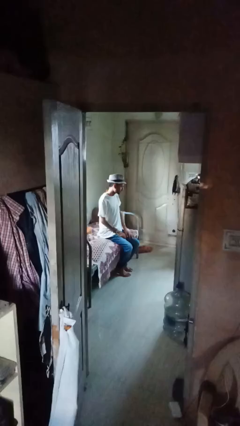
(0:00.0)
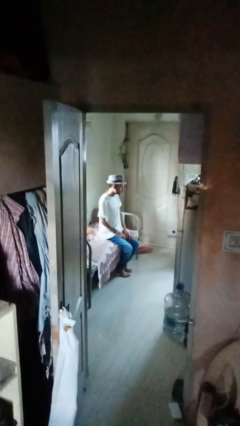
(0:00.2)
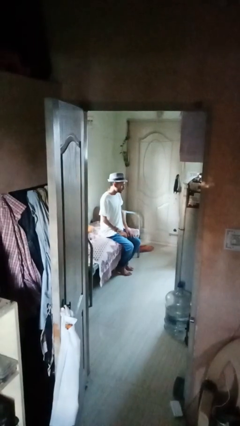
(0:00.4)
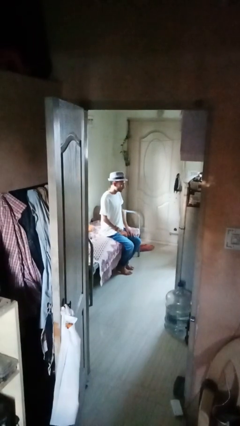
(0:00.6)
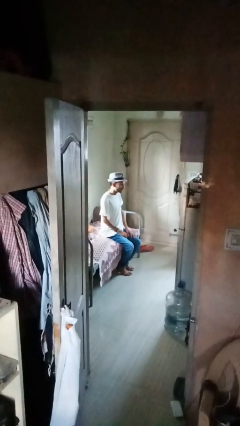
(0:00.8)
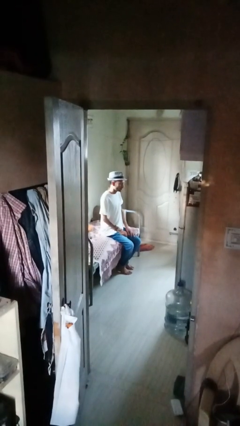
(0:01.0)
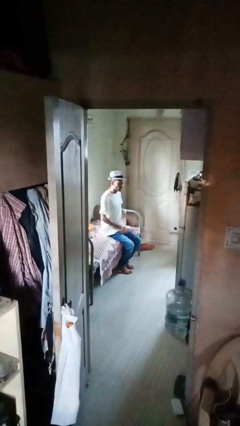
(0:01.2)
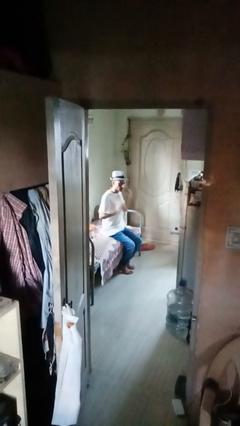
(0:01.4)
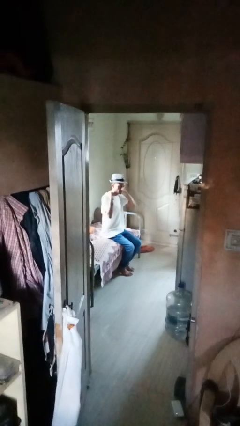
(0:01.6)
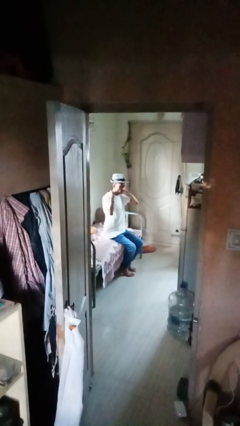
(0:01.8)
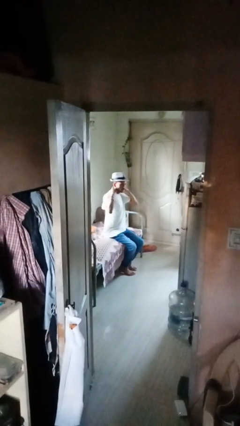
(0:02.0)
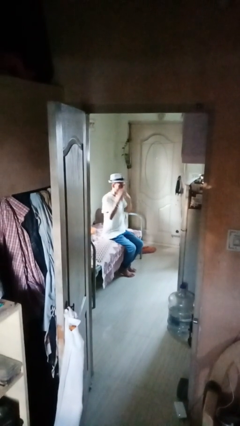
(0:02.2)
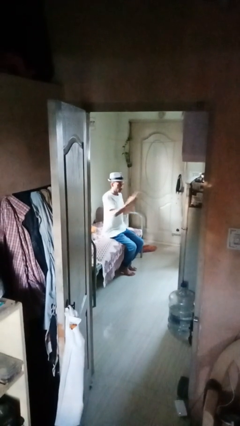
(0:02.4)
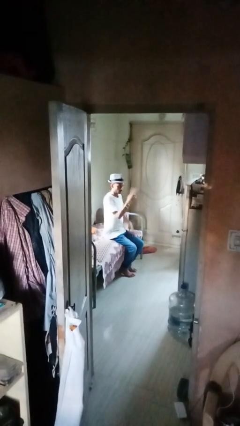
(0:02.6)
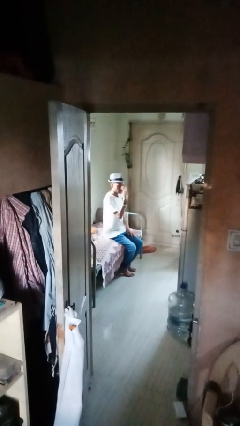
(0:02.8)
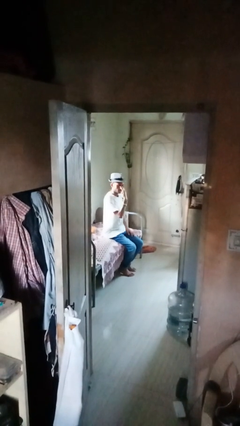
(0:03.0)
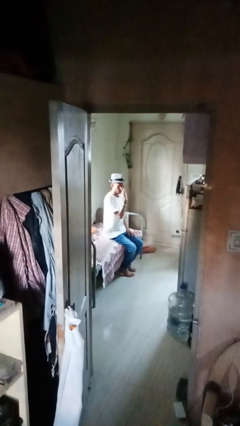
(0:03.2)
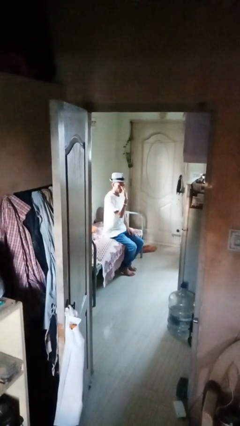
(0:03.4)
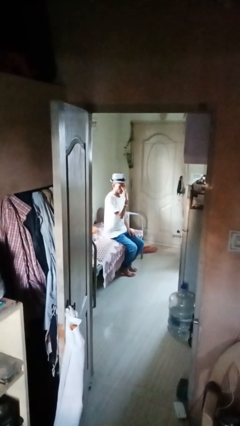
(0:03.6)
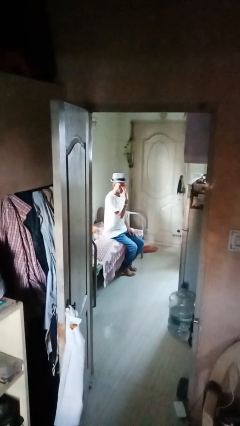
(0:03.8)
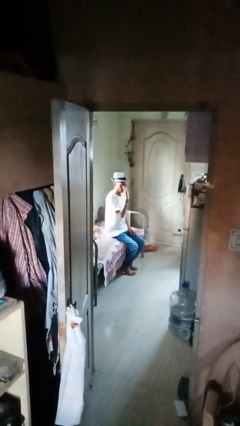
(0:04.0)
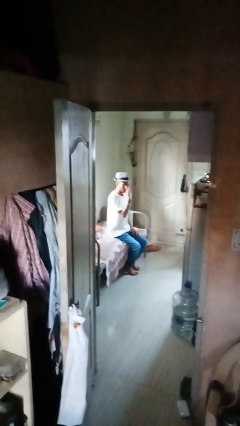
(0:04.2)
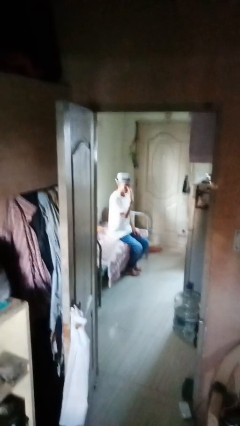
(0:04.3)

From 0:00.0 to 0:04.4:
person gestures watch closely

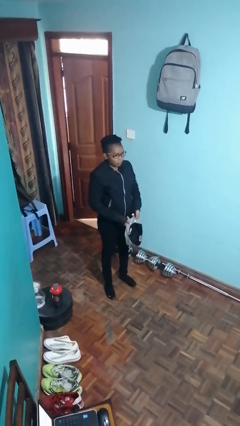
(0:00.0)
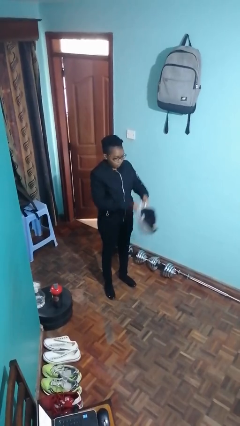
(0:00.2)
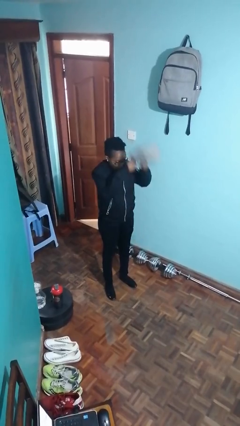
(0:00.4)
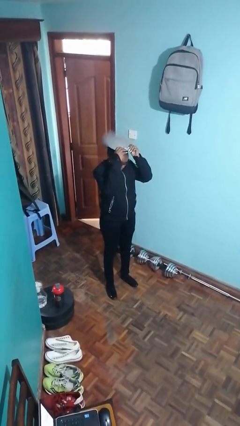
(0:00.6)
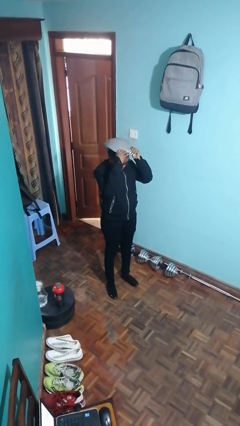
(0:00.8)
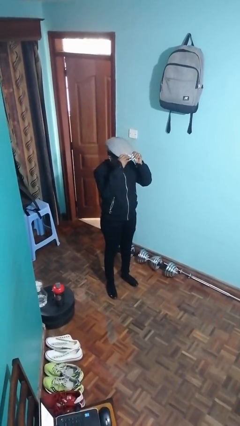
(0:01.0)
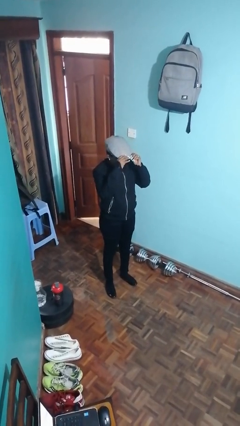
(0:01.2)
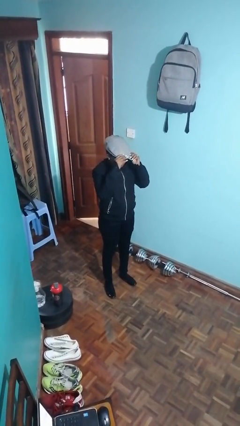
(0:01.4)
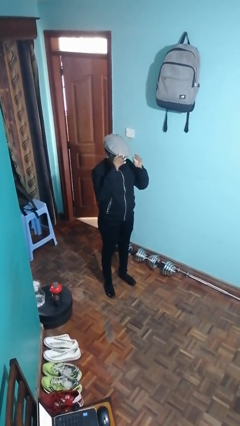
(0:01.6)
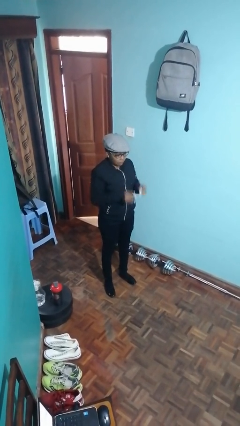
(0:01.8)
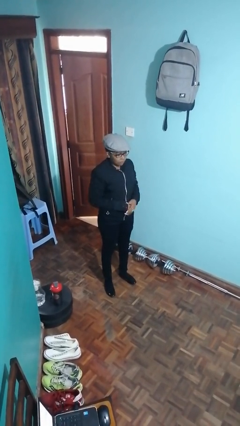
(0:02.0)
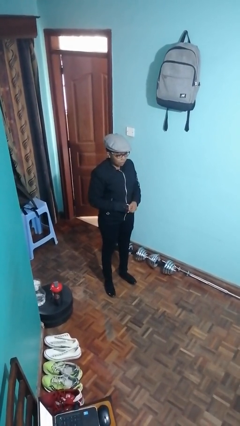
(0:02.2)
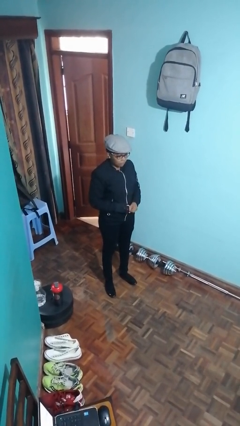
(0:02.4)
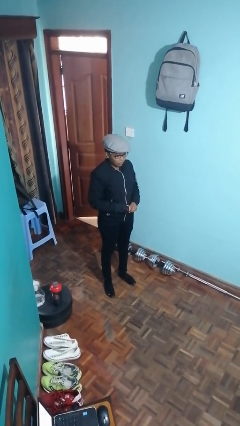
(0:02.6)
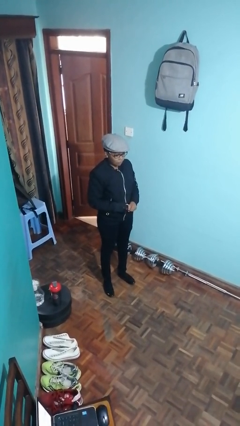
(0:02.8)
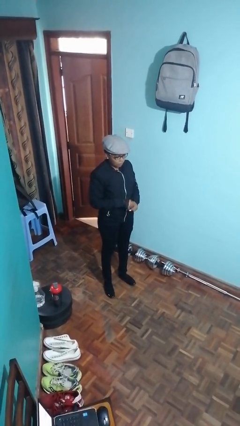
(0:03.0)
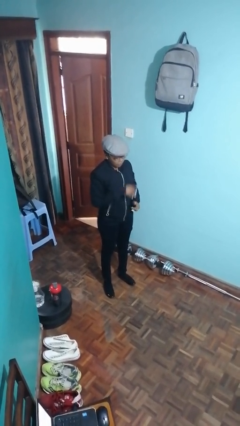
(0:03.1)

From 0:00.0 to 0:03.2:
person puts on hat

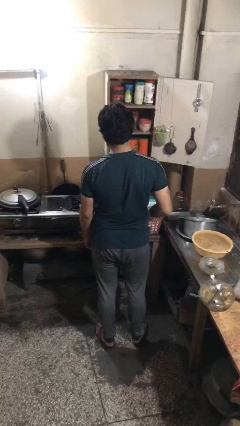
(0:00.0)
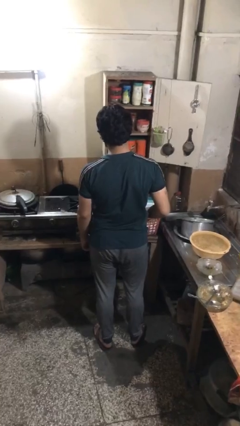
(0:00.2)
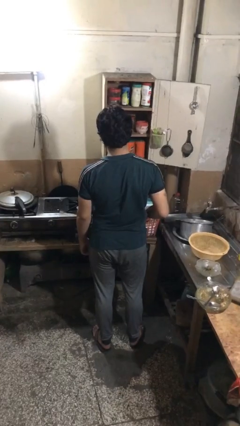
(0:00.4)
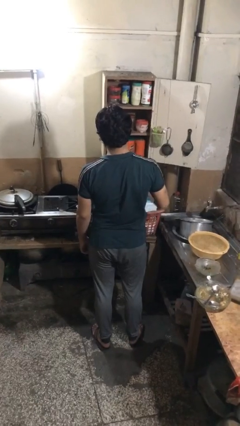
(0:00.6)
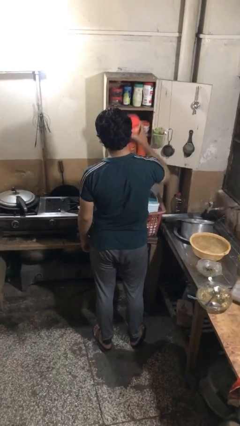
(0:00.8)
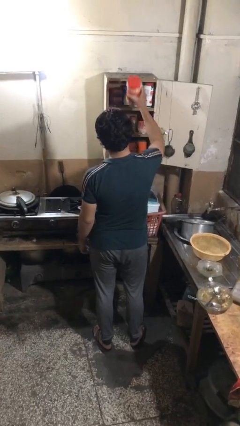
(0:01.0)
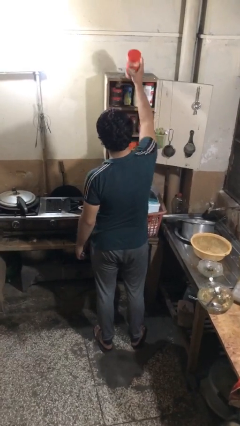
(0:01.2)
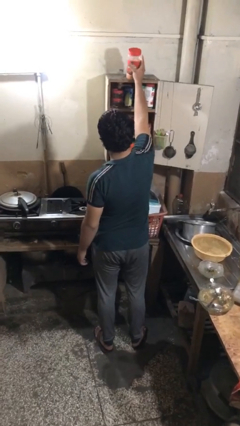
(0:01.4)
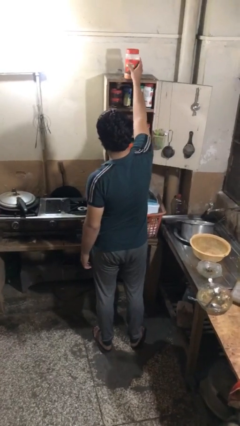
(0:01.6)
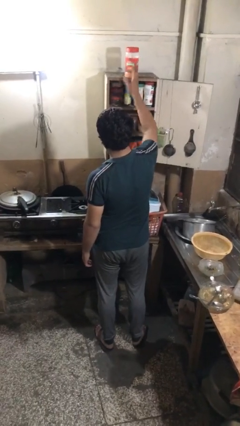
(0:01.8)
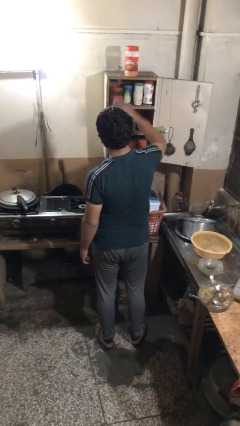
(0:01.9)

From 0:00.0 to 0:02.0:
person takes object from cabinet

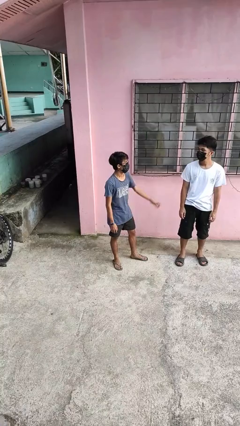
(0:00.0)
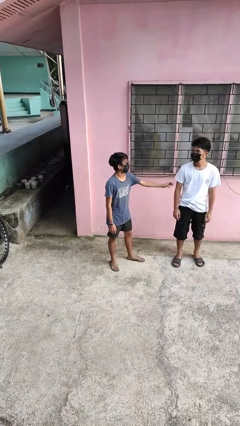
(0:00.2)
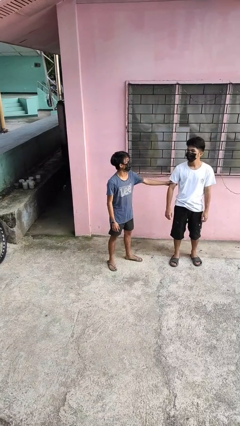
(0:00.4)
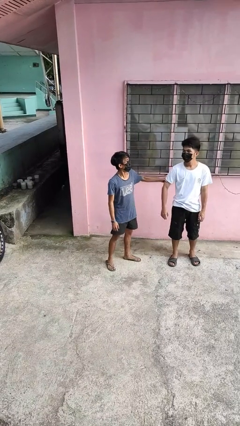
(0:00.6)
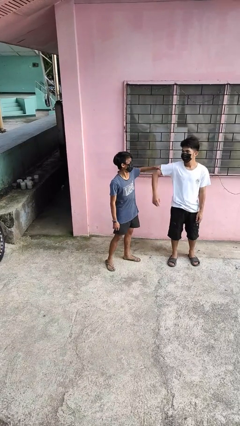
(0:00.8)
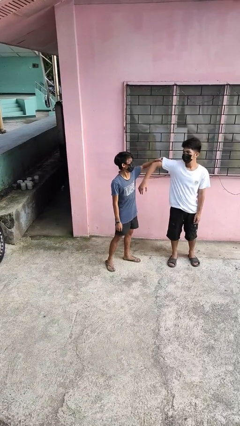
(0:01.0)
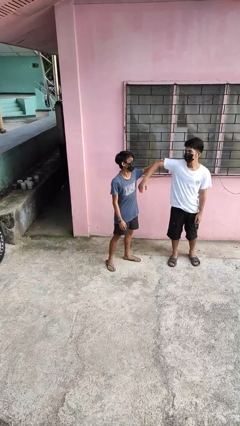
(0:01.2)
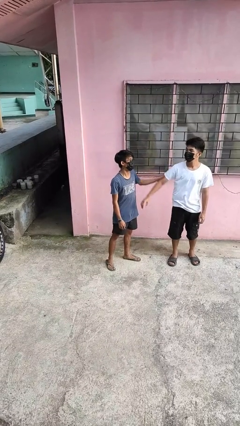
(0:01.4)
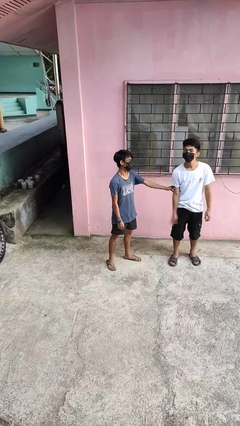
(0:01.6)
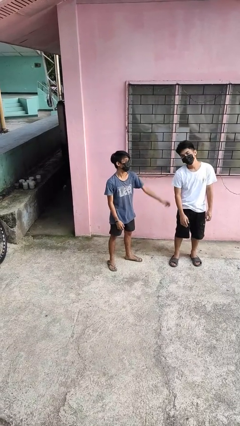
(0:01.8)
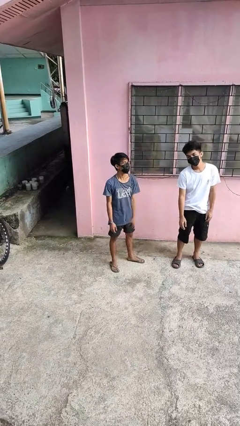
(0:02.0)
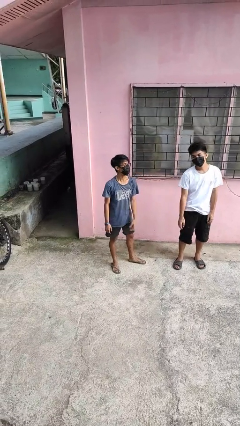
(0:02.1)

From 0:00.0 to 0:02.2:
person grabs person by bicep

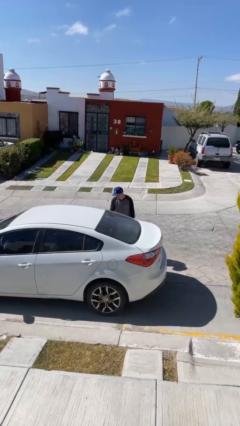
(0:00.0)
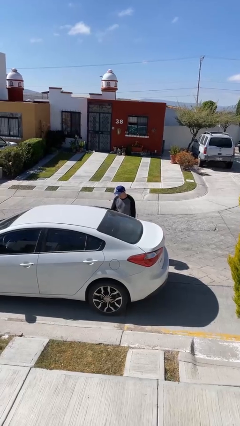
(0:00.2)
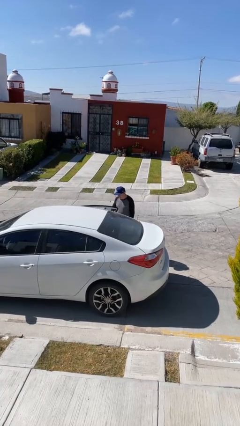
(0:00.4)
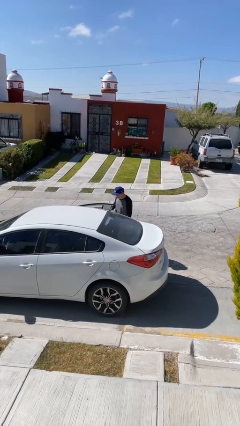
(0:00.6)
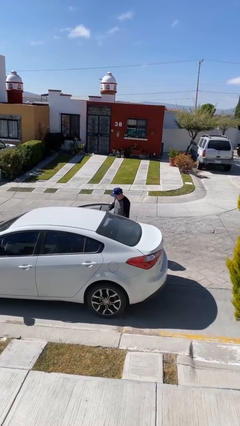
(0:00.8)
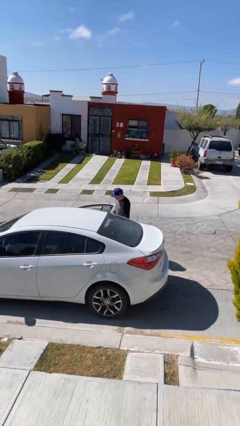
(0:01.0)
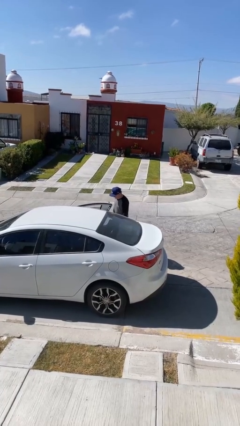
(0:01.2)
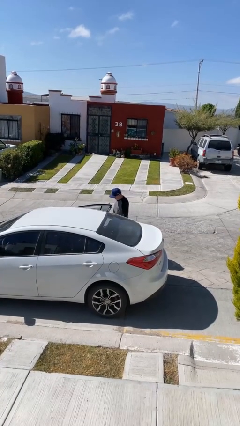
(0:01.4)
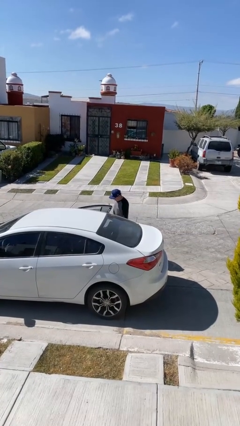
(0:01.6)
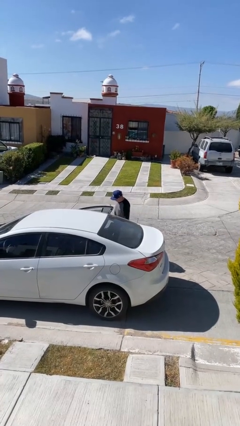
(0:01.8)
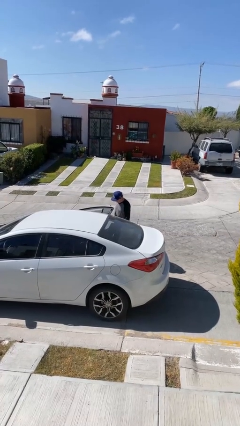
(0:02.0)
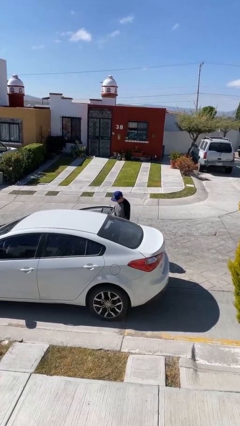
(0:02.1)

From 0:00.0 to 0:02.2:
person opens car door

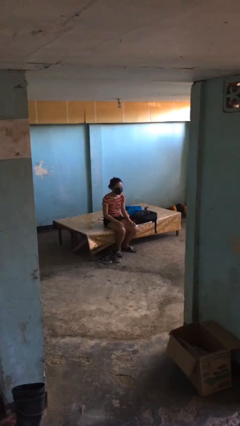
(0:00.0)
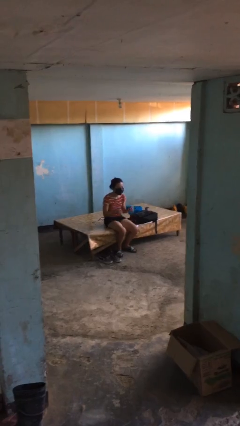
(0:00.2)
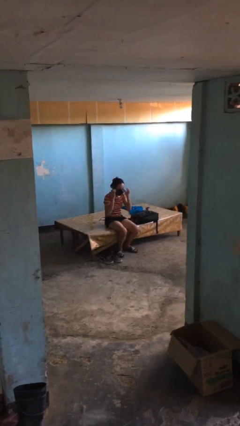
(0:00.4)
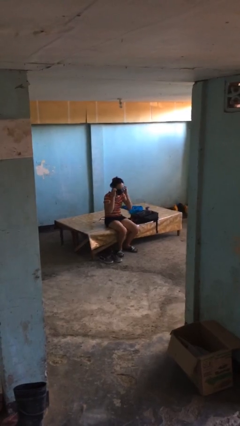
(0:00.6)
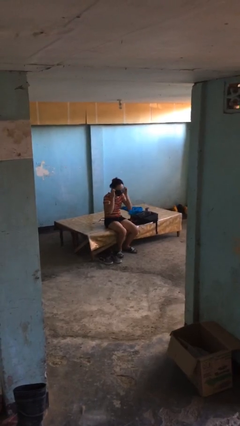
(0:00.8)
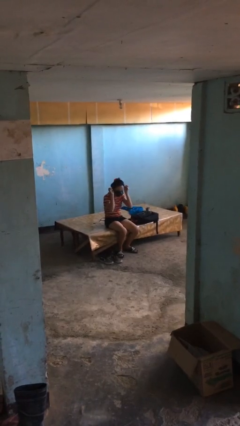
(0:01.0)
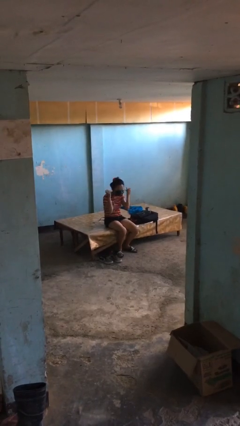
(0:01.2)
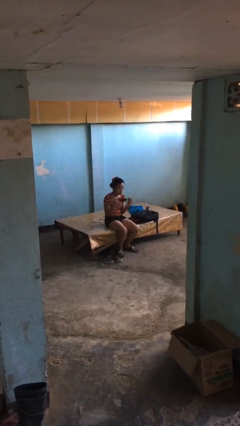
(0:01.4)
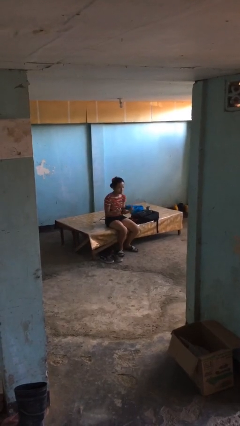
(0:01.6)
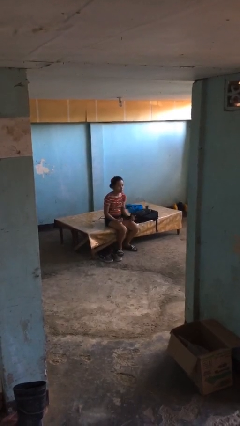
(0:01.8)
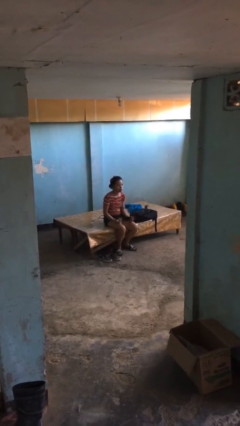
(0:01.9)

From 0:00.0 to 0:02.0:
person takes off facemask

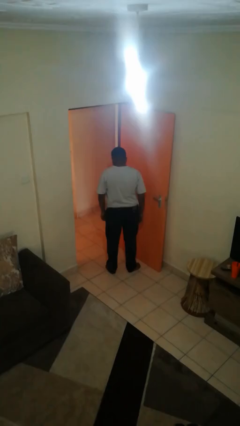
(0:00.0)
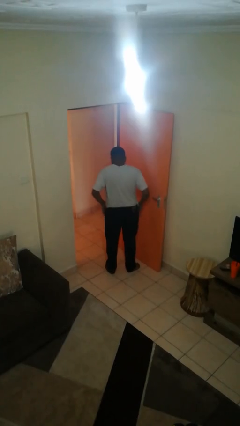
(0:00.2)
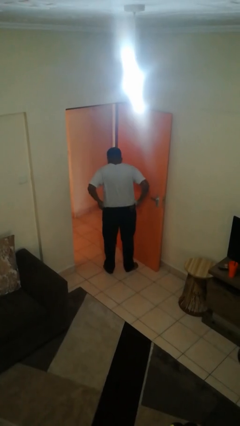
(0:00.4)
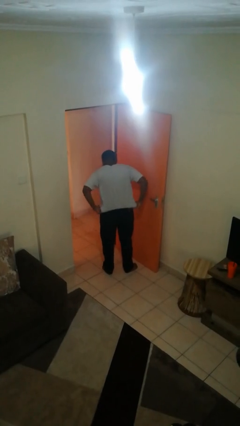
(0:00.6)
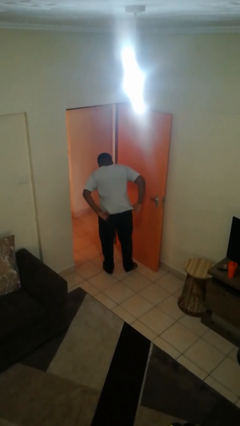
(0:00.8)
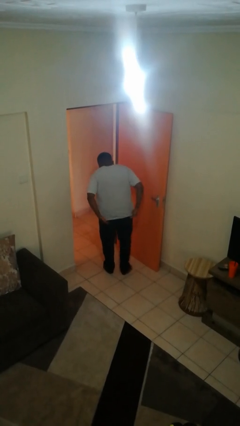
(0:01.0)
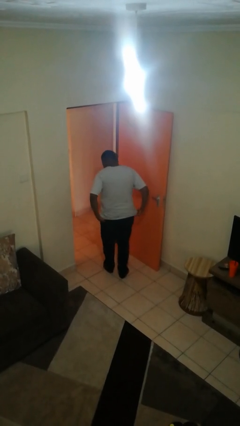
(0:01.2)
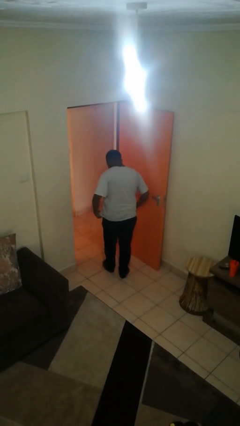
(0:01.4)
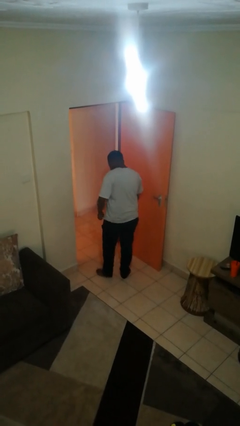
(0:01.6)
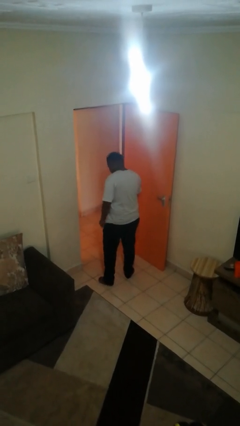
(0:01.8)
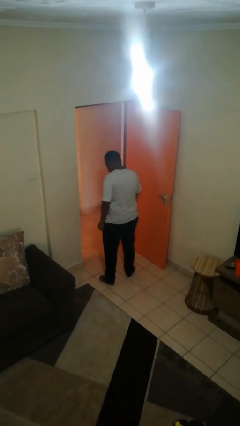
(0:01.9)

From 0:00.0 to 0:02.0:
person untucks shirt
